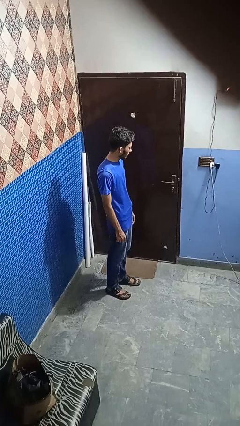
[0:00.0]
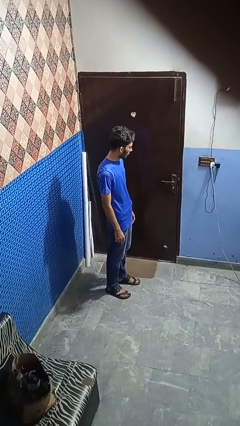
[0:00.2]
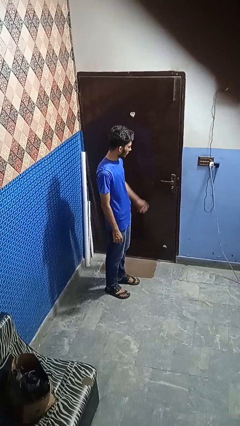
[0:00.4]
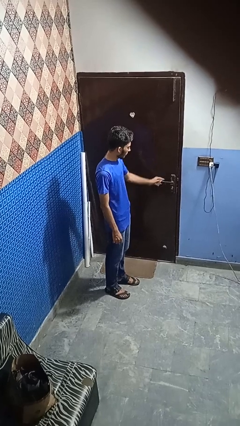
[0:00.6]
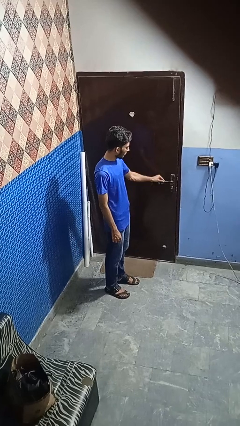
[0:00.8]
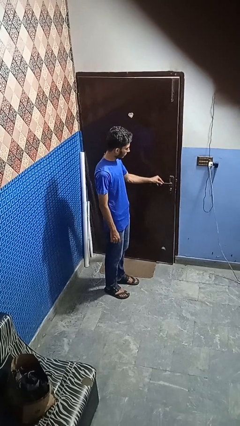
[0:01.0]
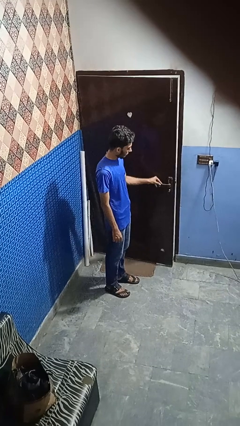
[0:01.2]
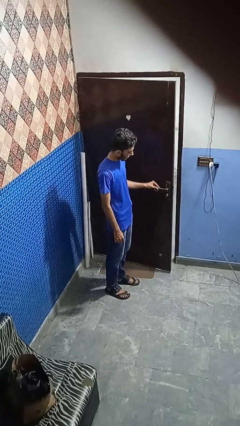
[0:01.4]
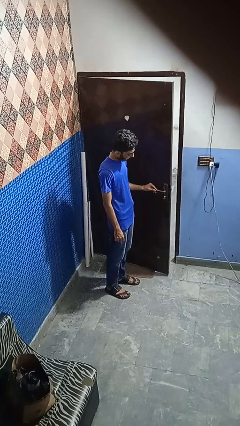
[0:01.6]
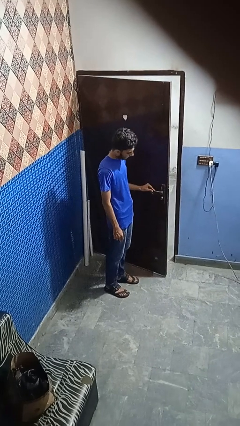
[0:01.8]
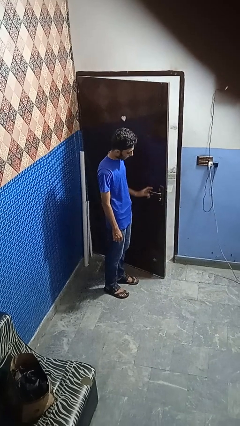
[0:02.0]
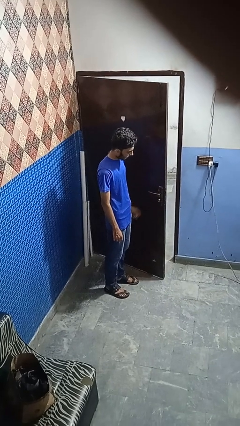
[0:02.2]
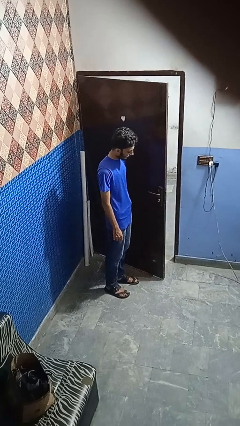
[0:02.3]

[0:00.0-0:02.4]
person opens facility door

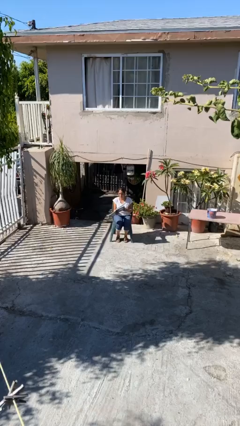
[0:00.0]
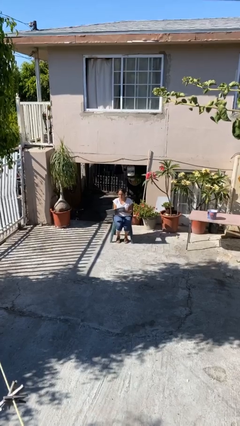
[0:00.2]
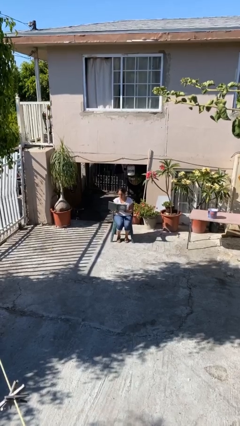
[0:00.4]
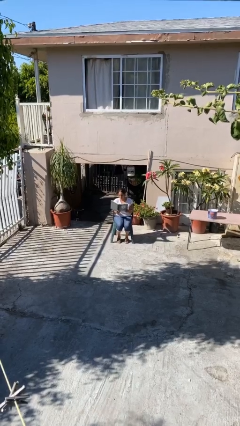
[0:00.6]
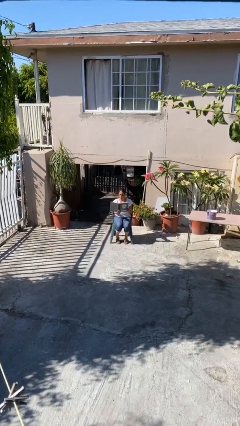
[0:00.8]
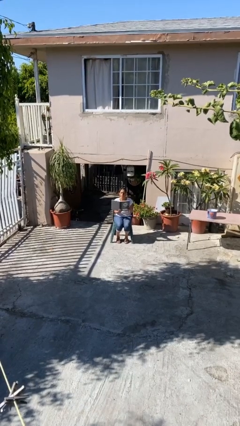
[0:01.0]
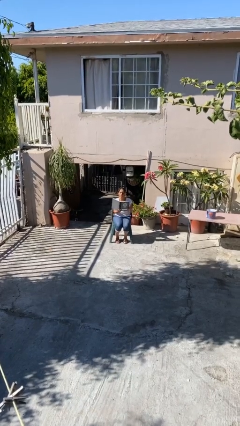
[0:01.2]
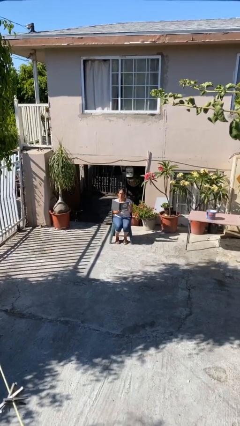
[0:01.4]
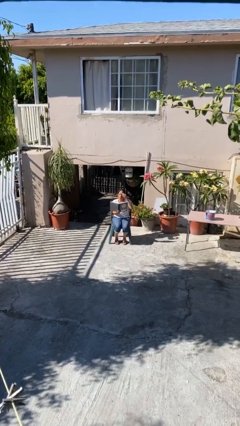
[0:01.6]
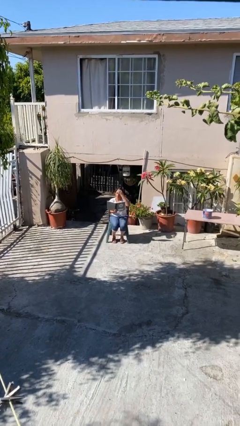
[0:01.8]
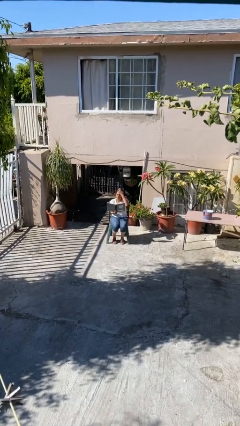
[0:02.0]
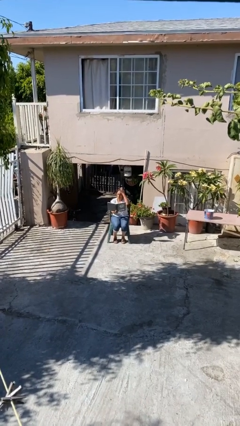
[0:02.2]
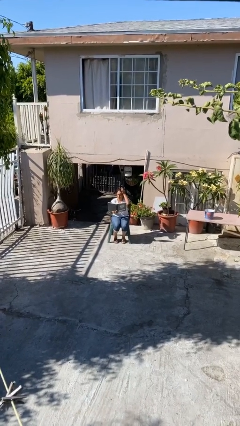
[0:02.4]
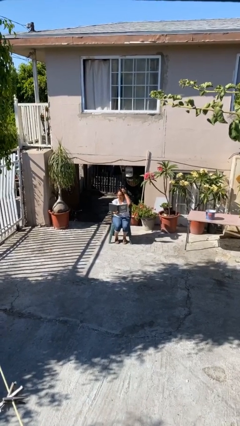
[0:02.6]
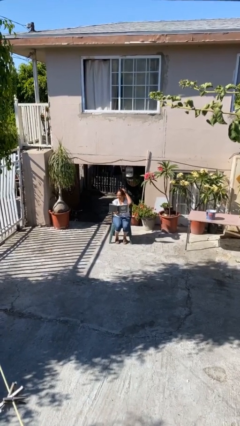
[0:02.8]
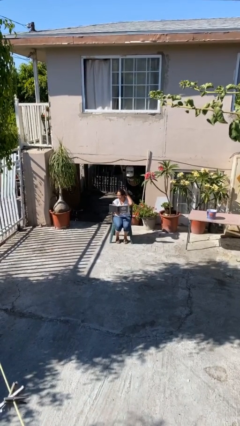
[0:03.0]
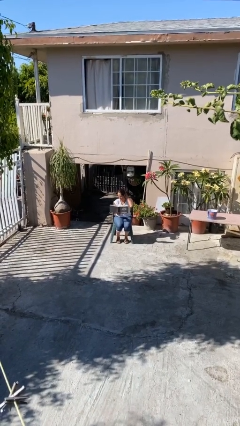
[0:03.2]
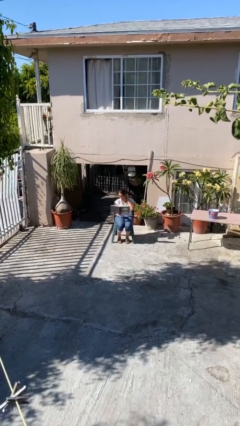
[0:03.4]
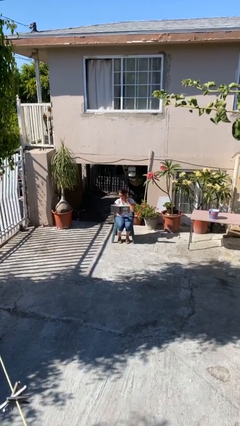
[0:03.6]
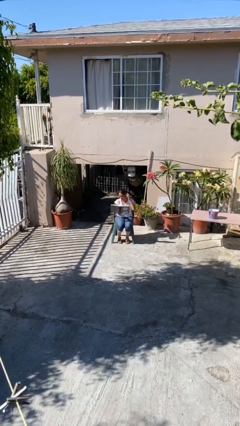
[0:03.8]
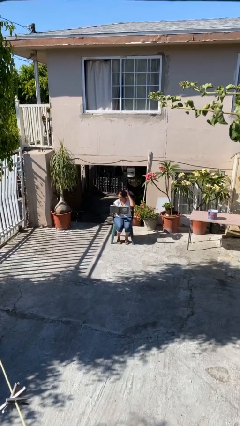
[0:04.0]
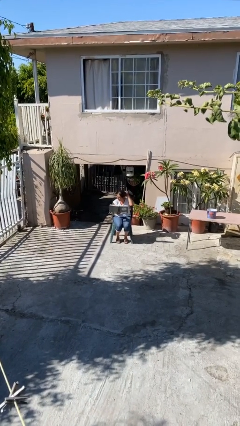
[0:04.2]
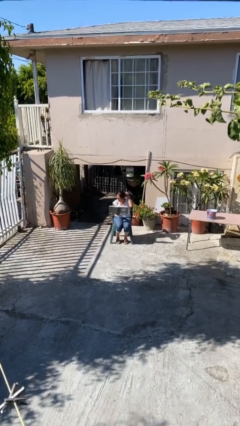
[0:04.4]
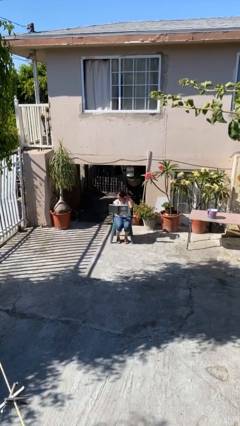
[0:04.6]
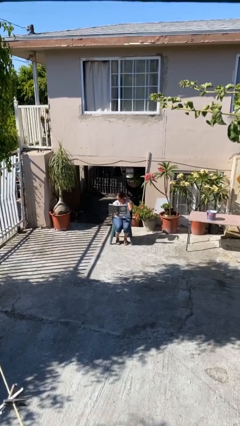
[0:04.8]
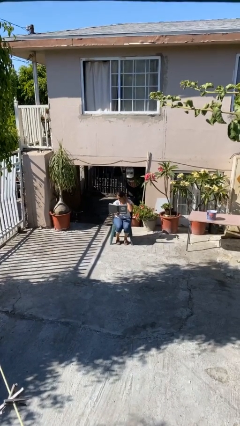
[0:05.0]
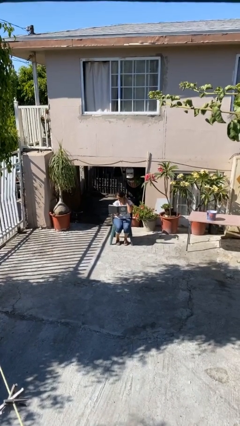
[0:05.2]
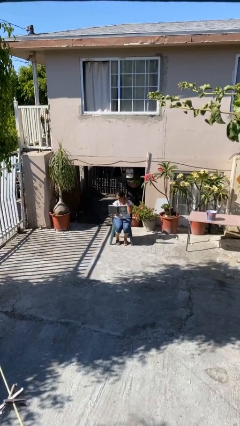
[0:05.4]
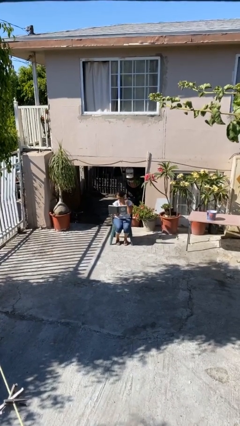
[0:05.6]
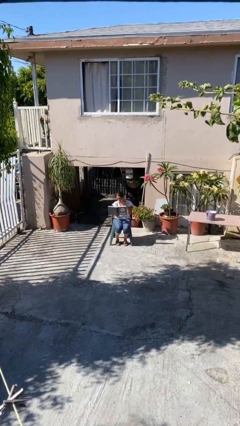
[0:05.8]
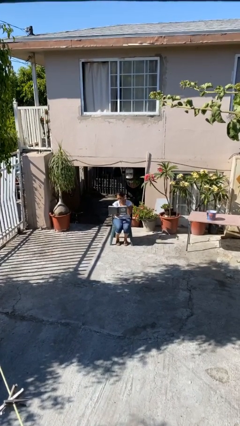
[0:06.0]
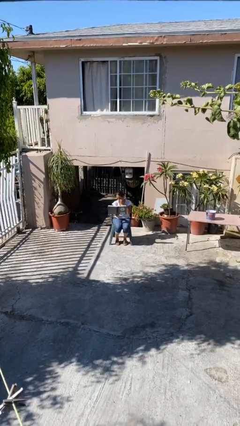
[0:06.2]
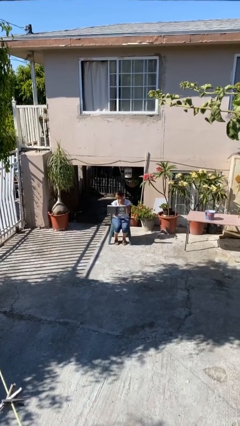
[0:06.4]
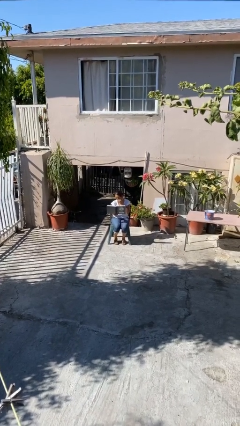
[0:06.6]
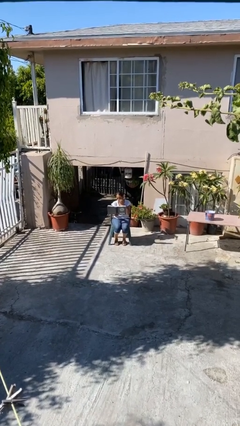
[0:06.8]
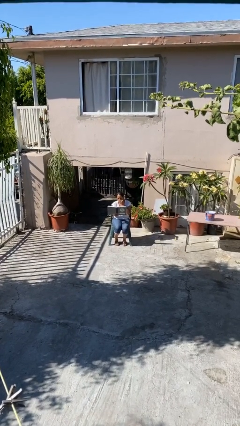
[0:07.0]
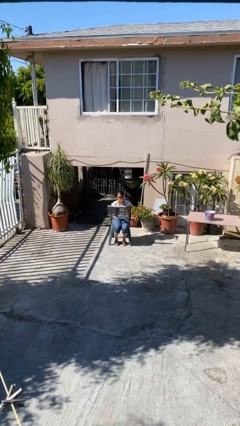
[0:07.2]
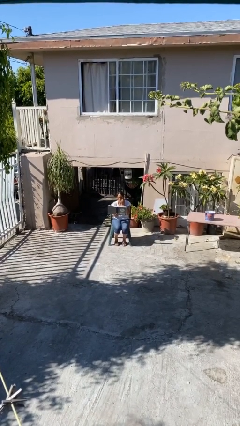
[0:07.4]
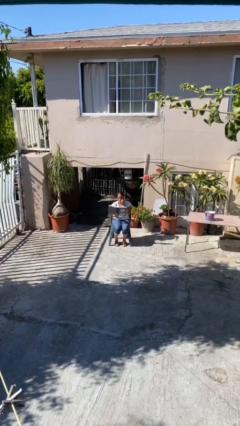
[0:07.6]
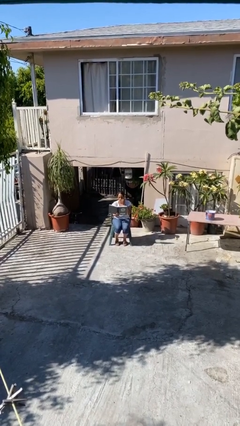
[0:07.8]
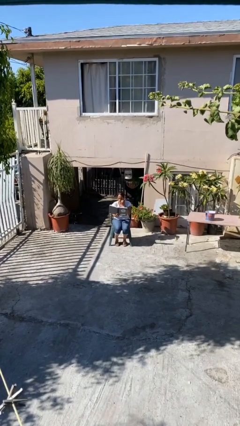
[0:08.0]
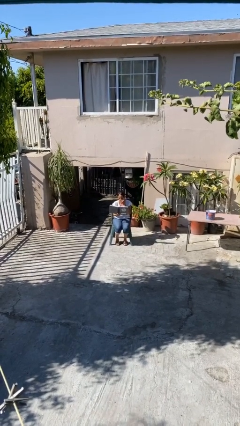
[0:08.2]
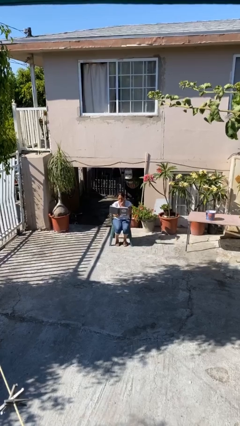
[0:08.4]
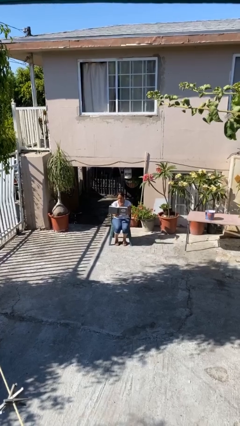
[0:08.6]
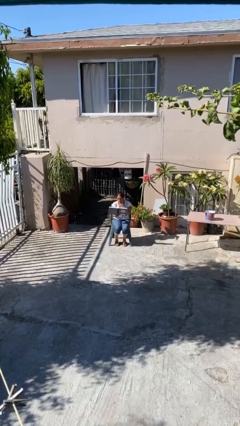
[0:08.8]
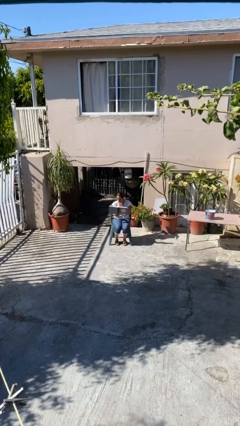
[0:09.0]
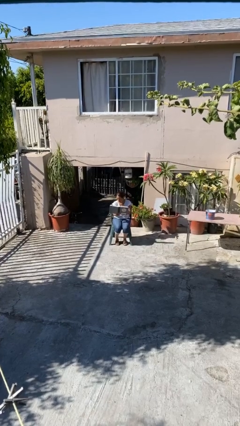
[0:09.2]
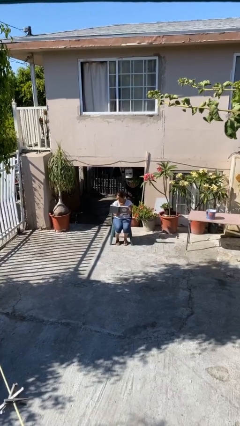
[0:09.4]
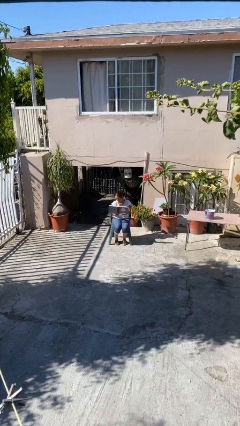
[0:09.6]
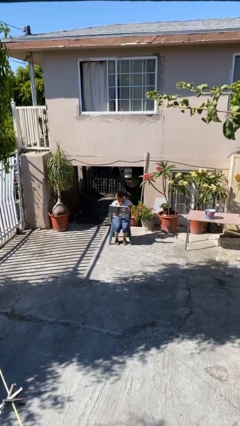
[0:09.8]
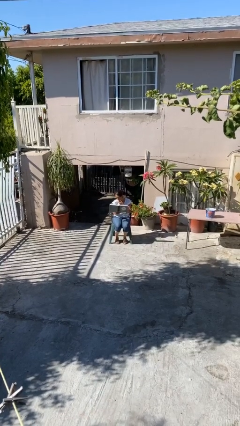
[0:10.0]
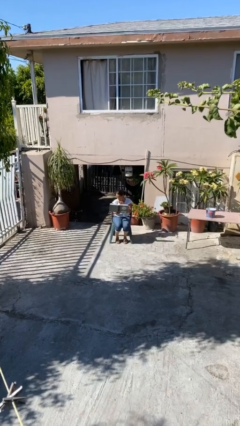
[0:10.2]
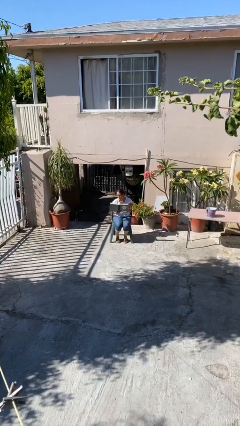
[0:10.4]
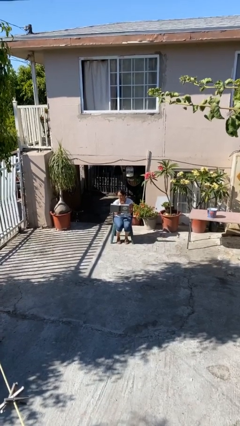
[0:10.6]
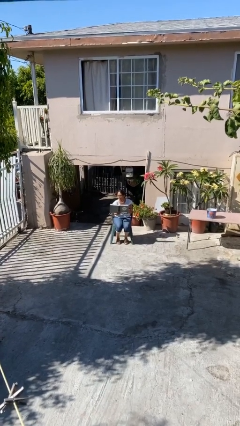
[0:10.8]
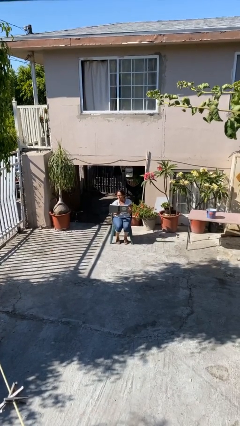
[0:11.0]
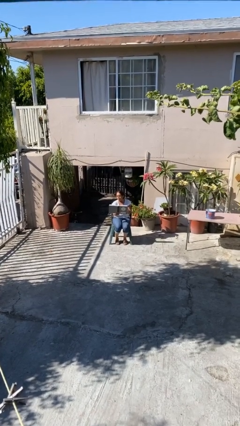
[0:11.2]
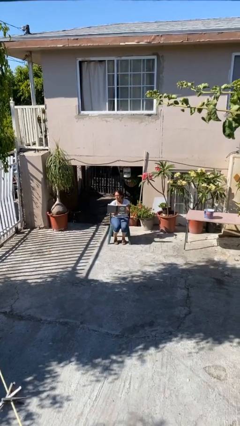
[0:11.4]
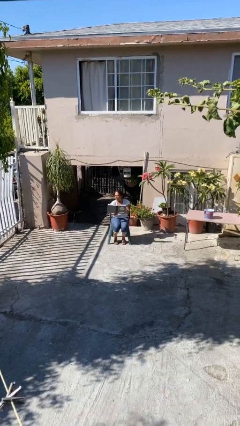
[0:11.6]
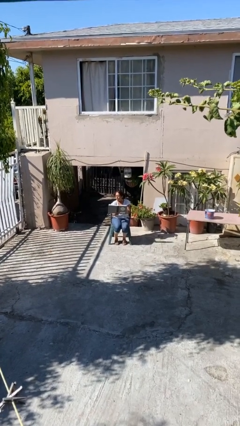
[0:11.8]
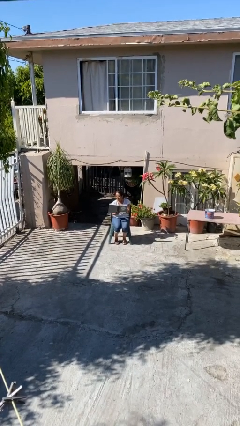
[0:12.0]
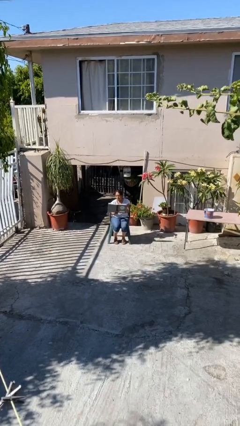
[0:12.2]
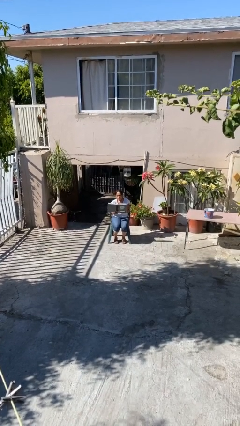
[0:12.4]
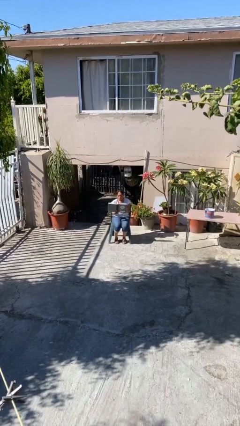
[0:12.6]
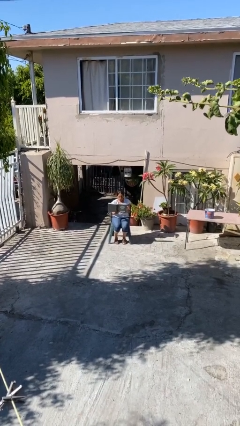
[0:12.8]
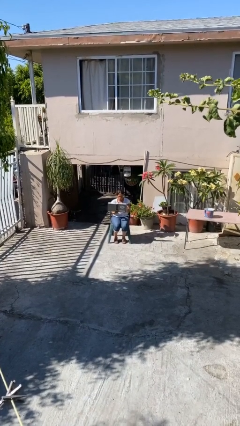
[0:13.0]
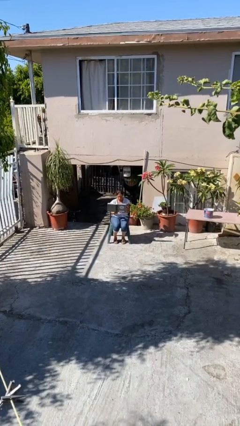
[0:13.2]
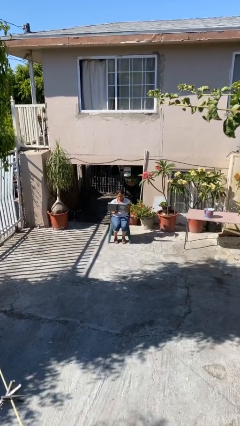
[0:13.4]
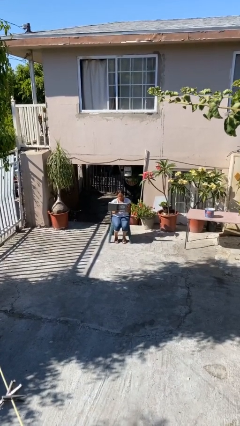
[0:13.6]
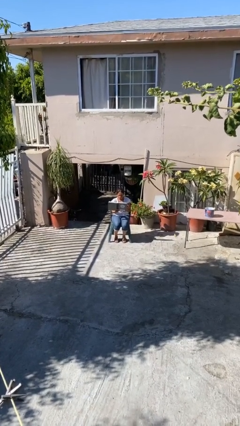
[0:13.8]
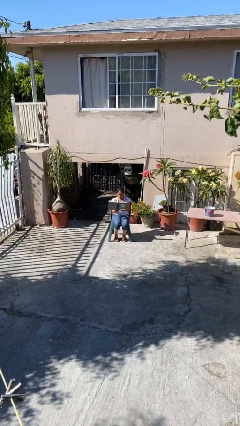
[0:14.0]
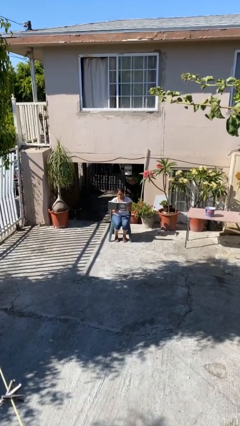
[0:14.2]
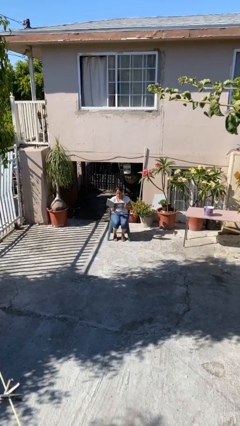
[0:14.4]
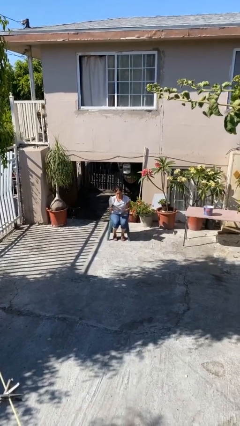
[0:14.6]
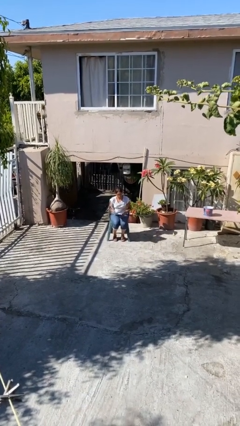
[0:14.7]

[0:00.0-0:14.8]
person reads document

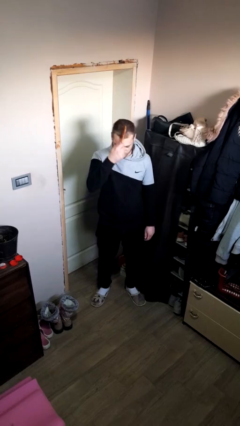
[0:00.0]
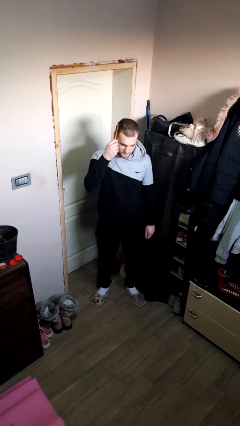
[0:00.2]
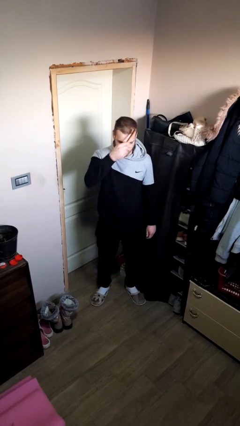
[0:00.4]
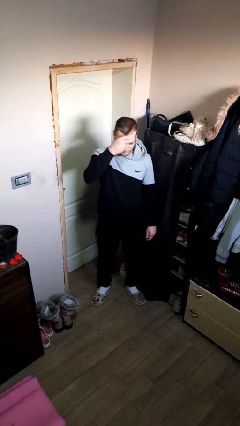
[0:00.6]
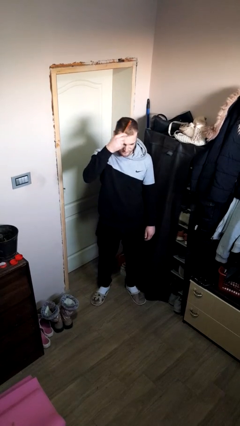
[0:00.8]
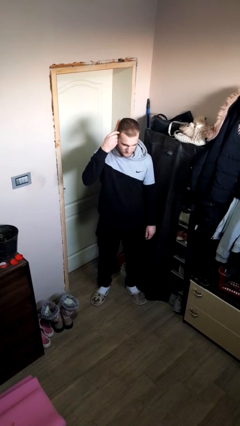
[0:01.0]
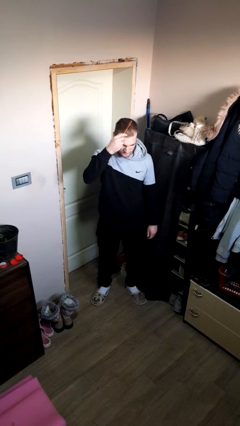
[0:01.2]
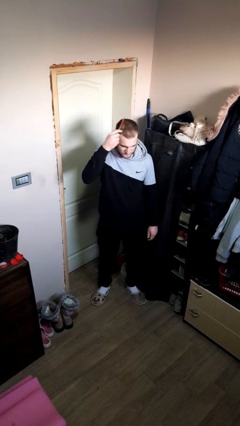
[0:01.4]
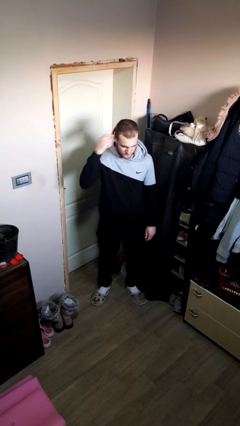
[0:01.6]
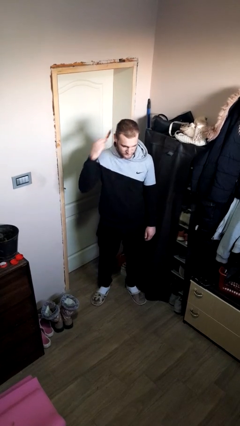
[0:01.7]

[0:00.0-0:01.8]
person brushes hair
